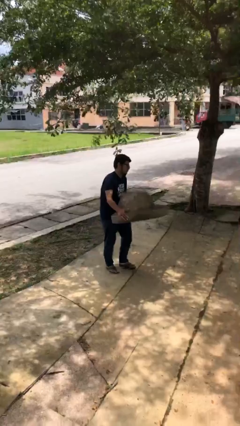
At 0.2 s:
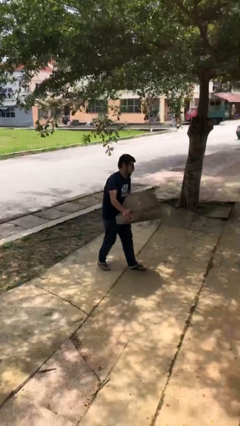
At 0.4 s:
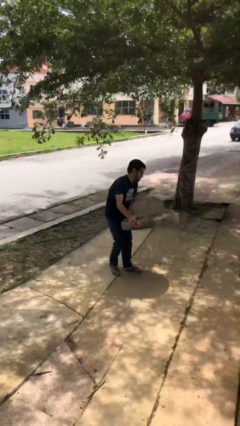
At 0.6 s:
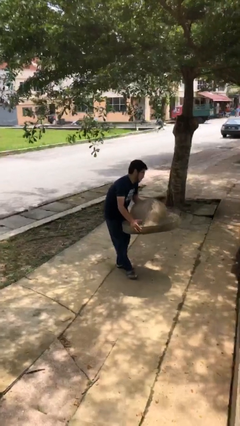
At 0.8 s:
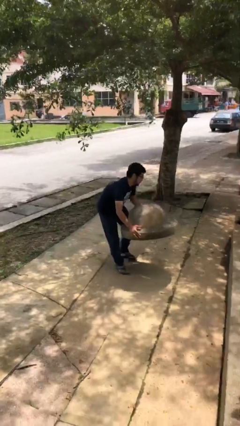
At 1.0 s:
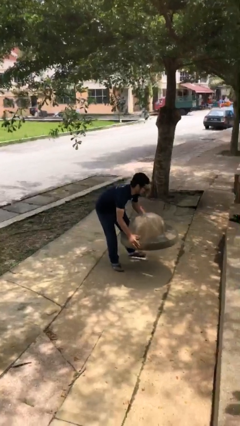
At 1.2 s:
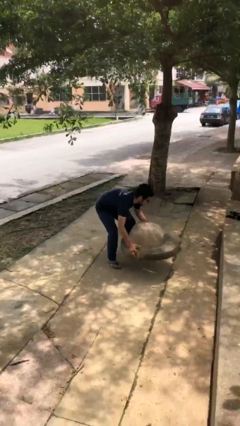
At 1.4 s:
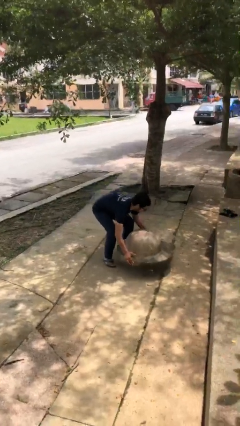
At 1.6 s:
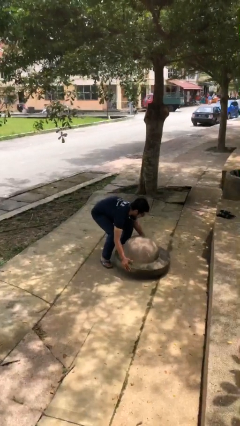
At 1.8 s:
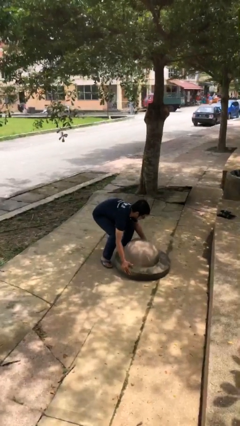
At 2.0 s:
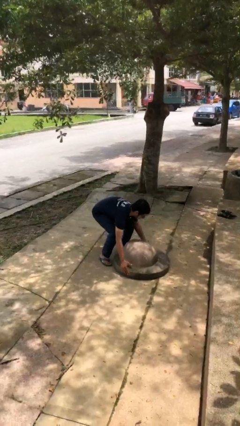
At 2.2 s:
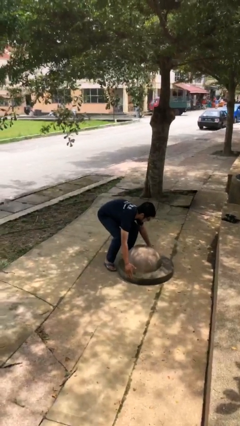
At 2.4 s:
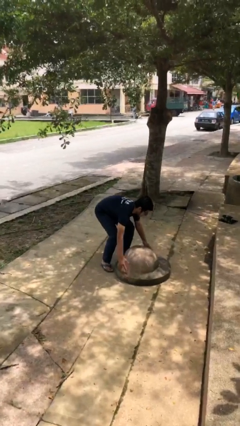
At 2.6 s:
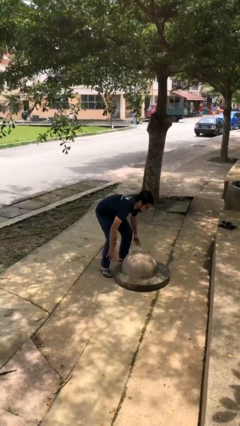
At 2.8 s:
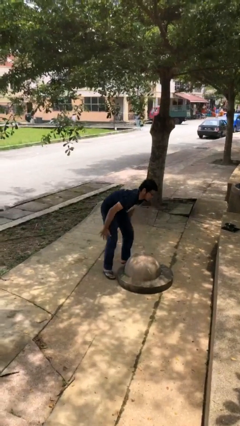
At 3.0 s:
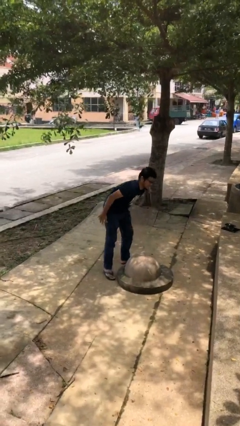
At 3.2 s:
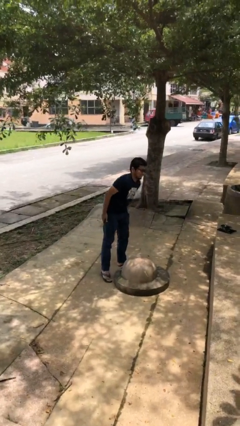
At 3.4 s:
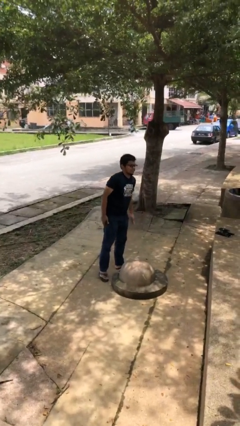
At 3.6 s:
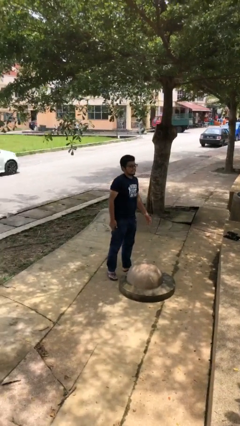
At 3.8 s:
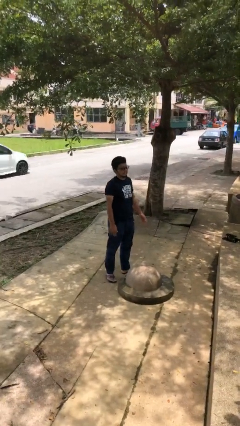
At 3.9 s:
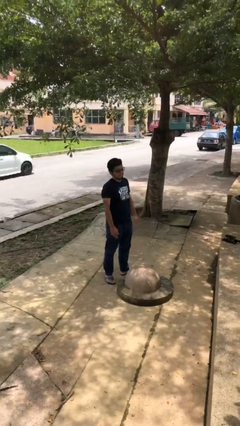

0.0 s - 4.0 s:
person puts down object on floor

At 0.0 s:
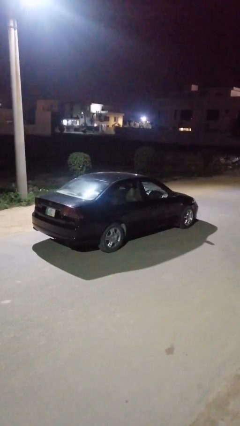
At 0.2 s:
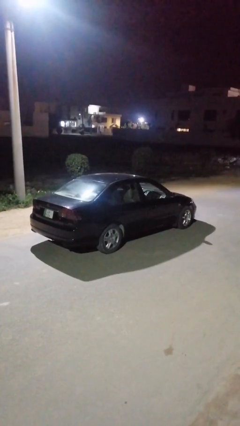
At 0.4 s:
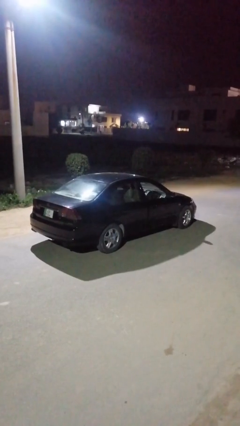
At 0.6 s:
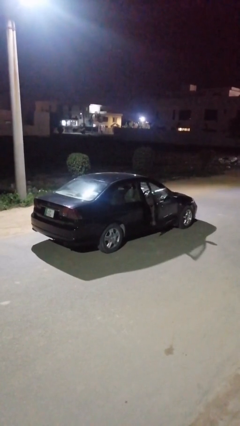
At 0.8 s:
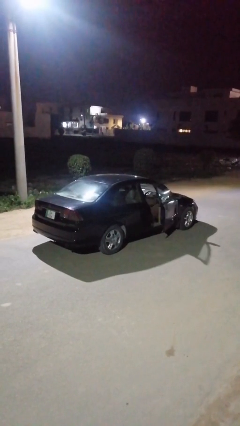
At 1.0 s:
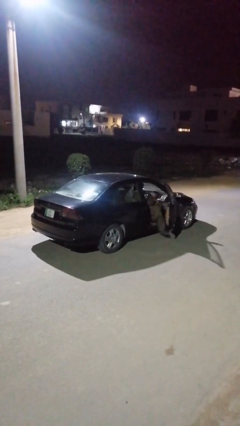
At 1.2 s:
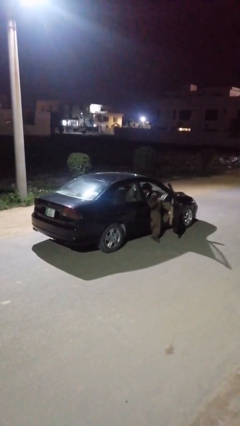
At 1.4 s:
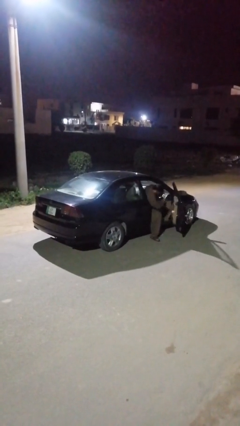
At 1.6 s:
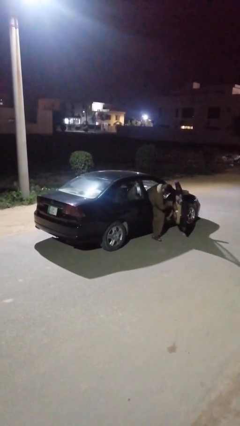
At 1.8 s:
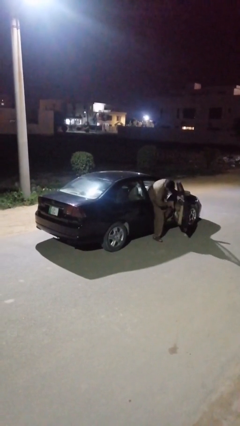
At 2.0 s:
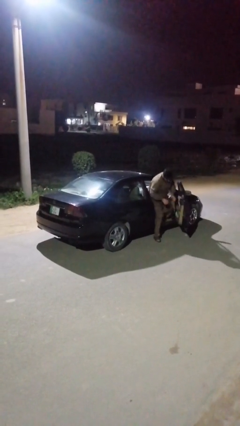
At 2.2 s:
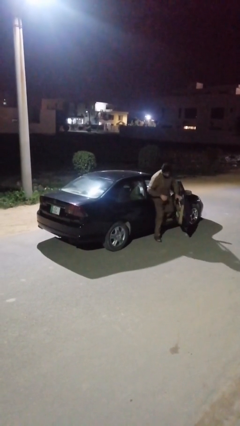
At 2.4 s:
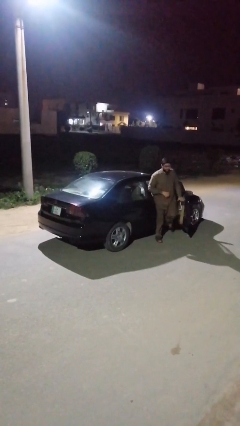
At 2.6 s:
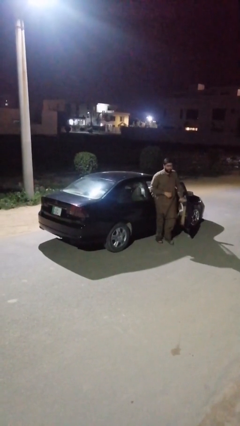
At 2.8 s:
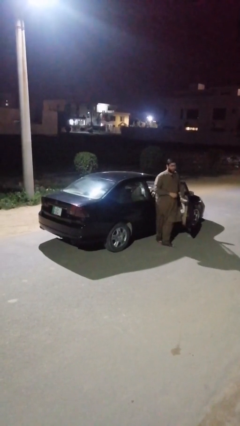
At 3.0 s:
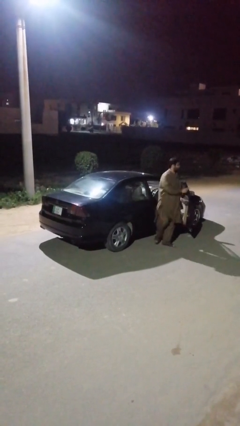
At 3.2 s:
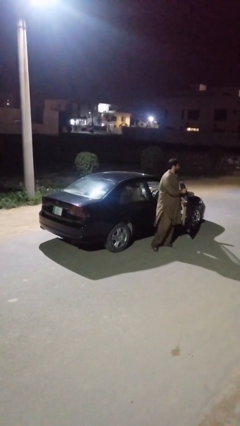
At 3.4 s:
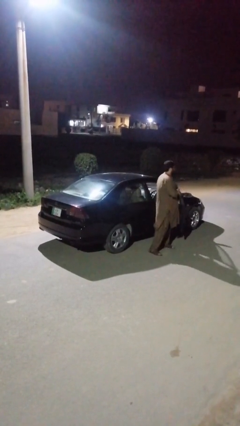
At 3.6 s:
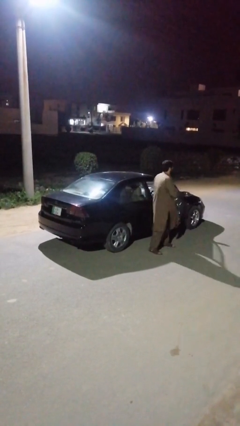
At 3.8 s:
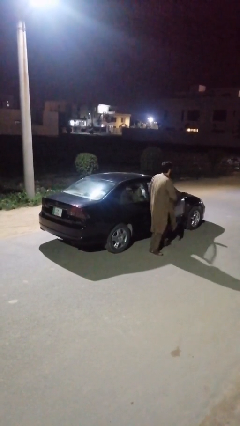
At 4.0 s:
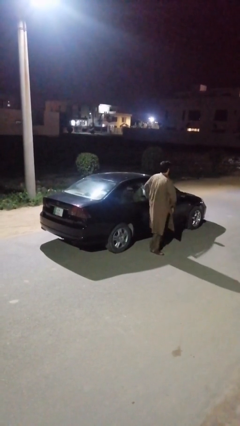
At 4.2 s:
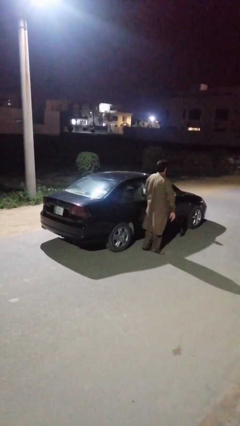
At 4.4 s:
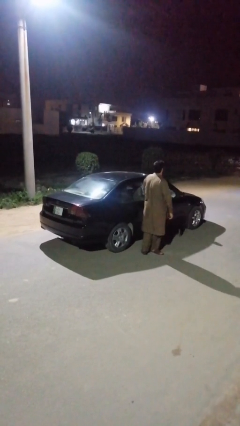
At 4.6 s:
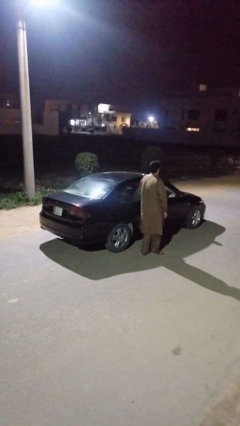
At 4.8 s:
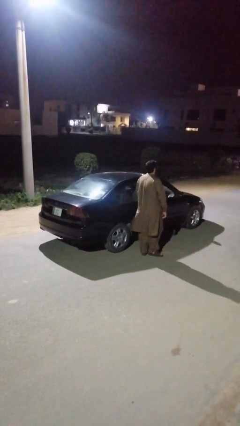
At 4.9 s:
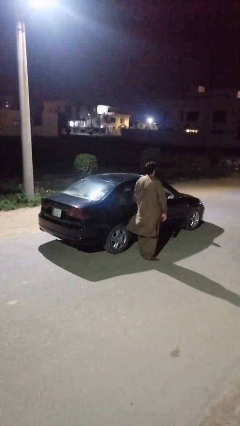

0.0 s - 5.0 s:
car drops off person

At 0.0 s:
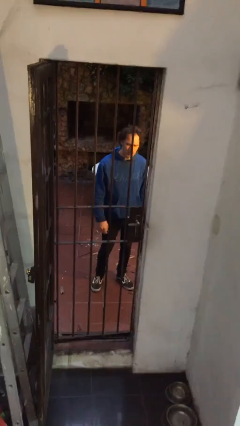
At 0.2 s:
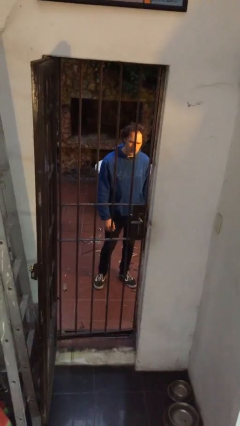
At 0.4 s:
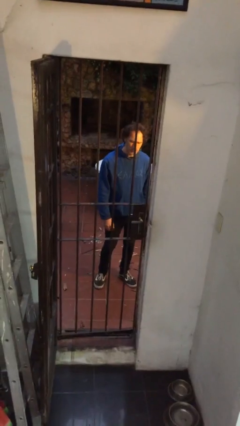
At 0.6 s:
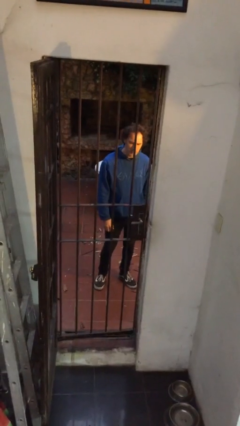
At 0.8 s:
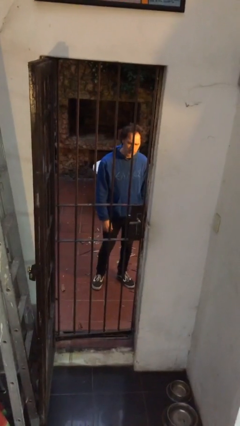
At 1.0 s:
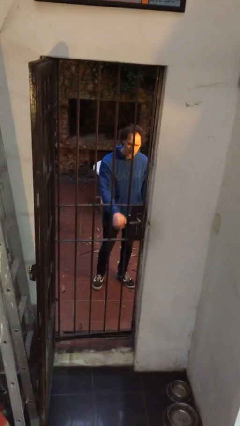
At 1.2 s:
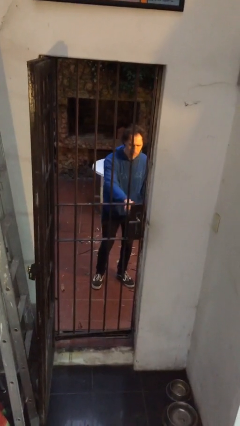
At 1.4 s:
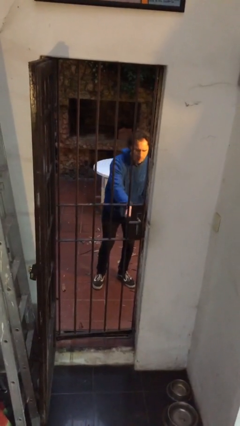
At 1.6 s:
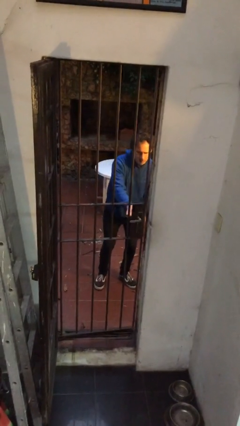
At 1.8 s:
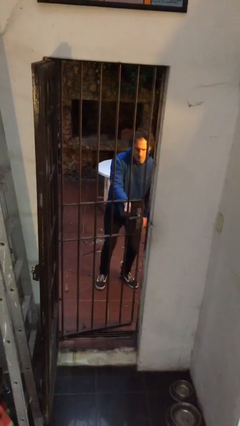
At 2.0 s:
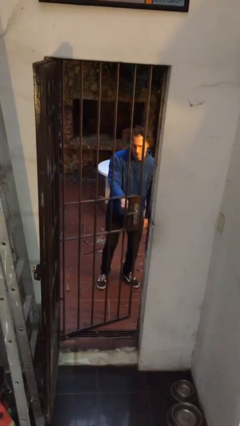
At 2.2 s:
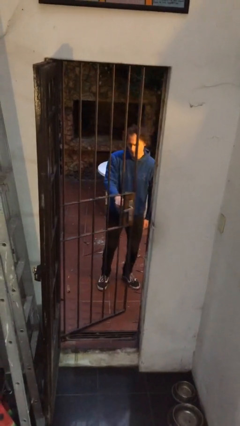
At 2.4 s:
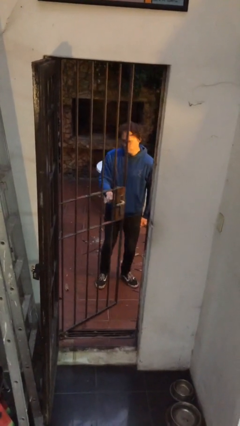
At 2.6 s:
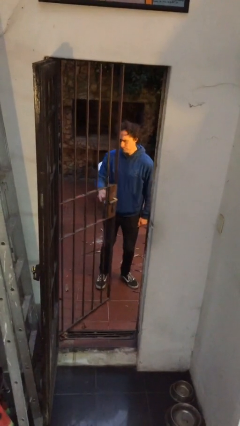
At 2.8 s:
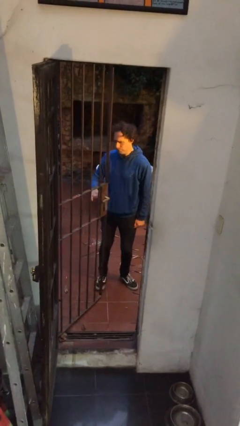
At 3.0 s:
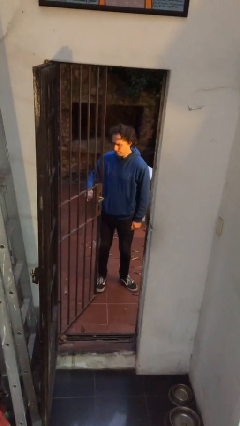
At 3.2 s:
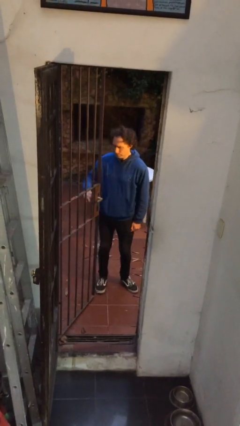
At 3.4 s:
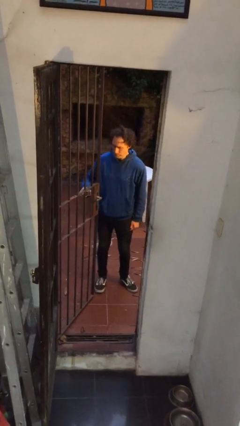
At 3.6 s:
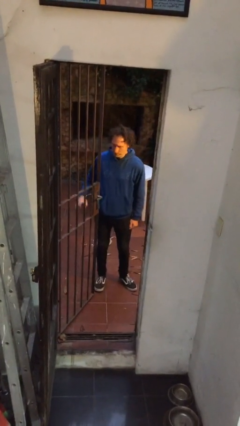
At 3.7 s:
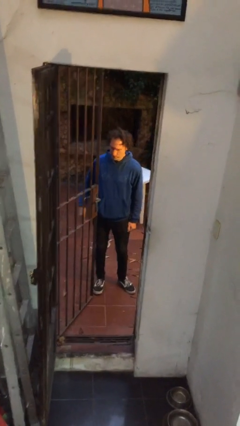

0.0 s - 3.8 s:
person opens gate

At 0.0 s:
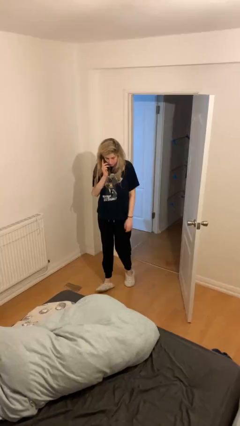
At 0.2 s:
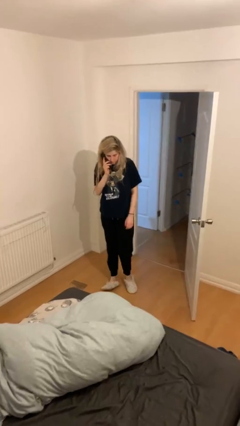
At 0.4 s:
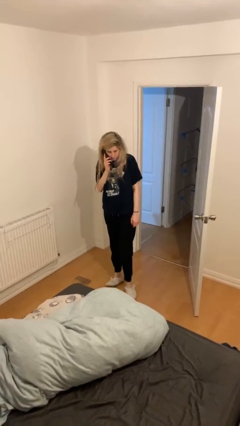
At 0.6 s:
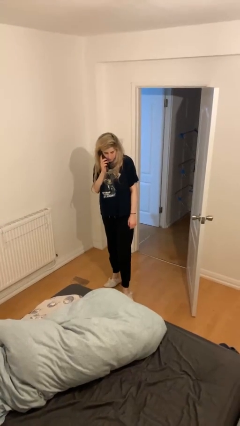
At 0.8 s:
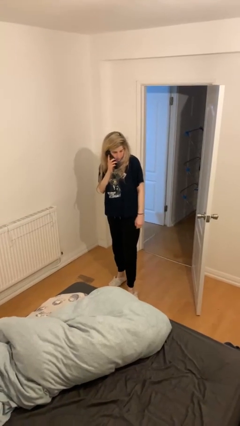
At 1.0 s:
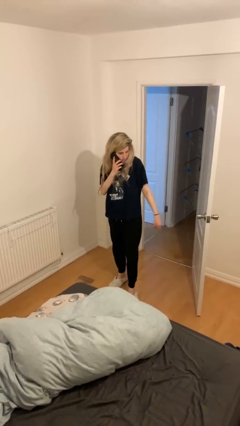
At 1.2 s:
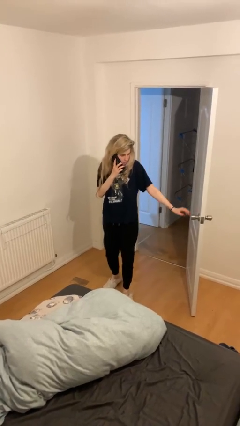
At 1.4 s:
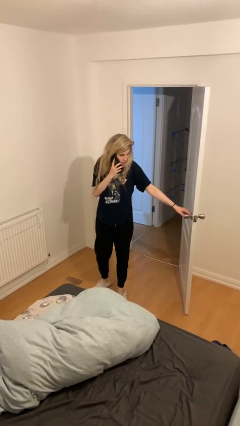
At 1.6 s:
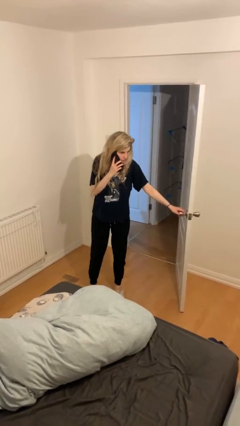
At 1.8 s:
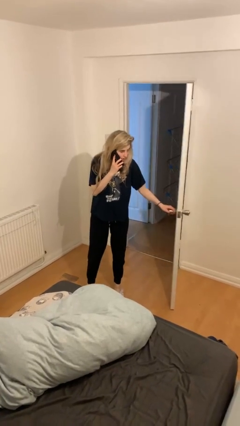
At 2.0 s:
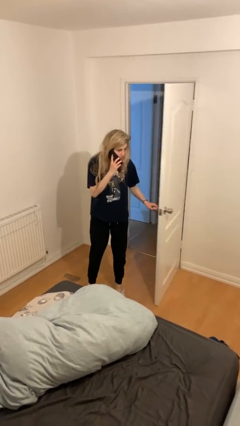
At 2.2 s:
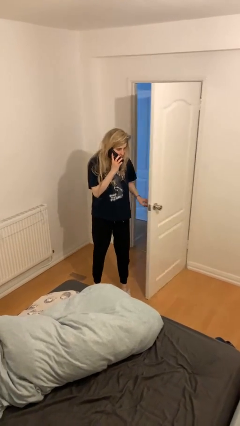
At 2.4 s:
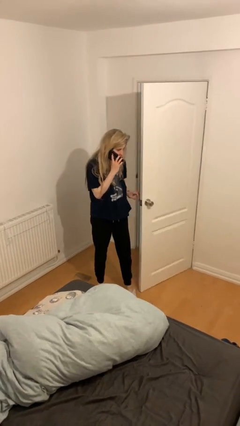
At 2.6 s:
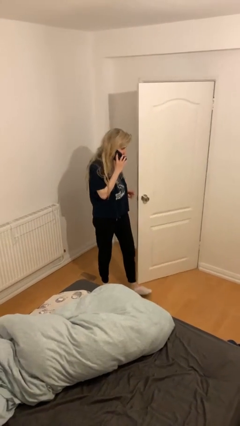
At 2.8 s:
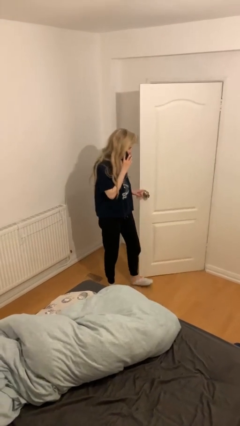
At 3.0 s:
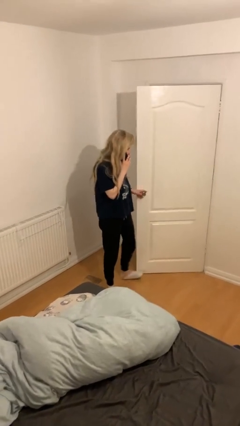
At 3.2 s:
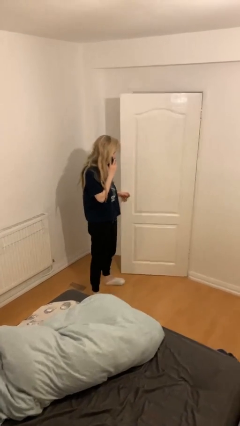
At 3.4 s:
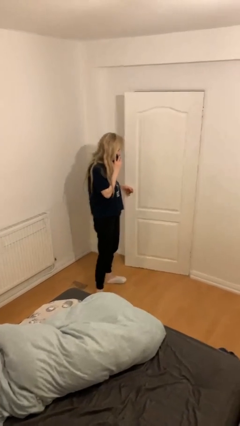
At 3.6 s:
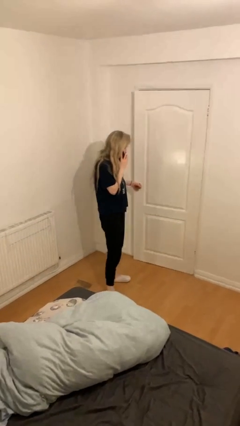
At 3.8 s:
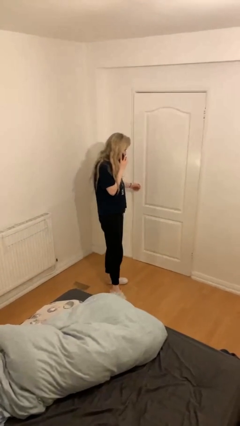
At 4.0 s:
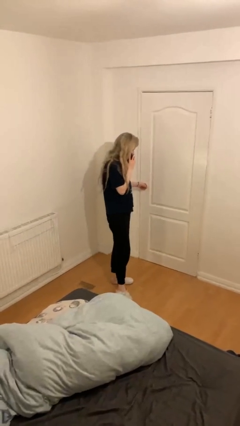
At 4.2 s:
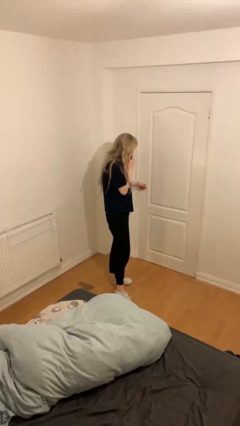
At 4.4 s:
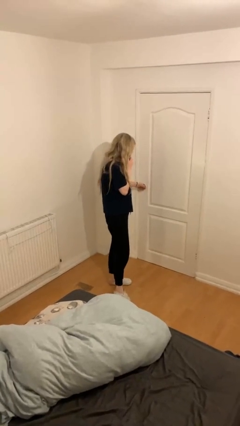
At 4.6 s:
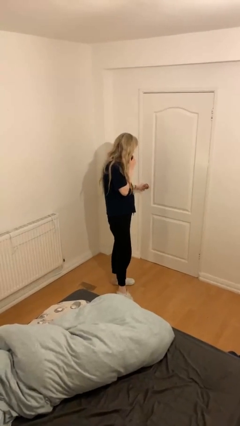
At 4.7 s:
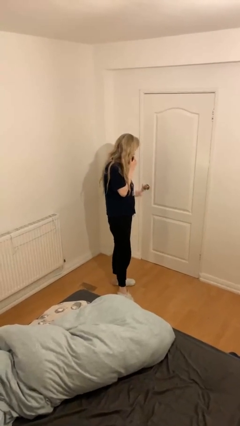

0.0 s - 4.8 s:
person closes facility door

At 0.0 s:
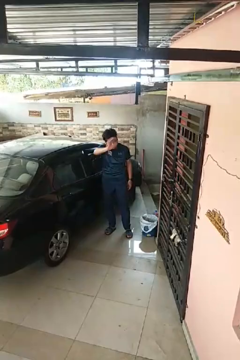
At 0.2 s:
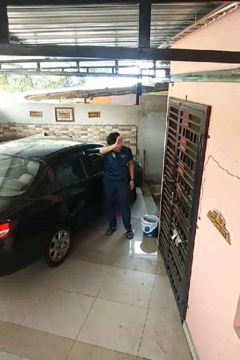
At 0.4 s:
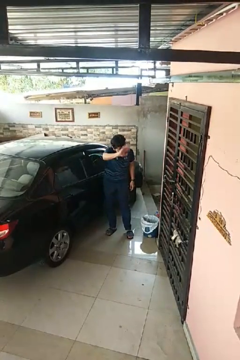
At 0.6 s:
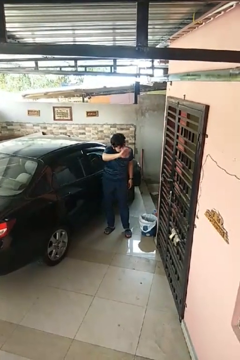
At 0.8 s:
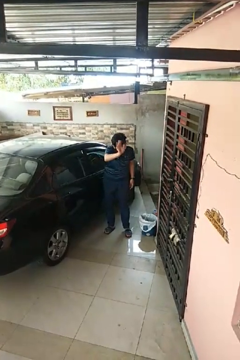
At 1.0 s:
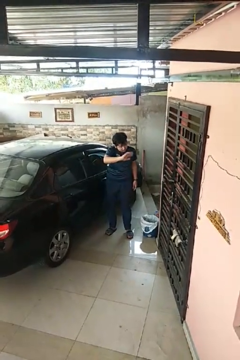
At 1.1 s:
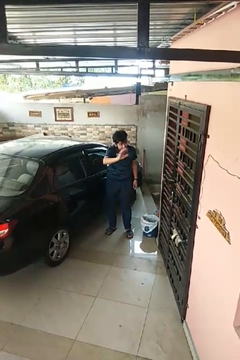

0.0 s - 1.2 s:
person waves at person
